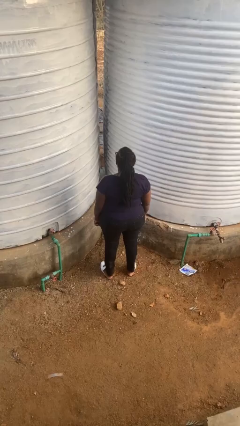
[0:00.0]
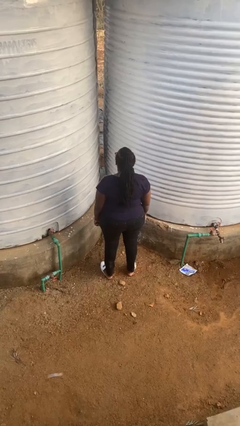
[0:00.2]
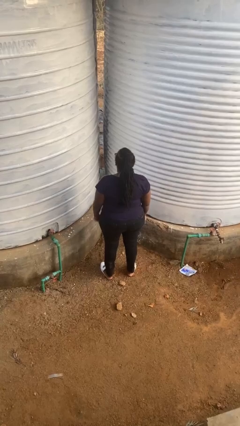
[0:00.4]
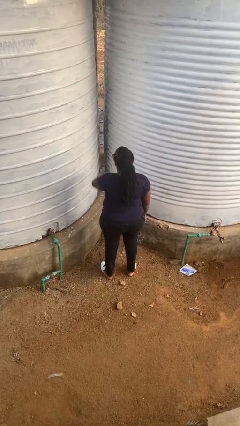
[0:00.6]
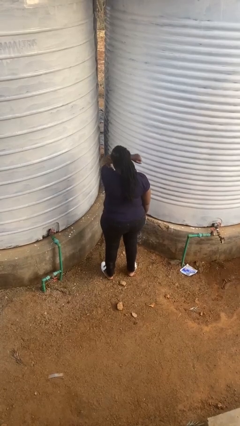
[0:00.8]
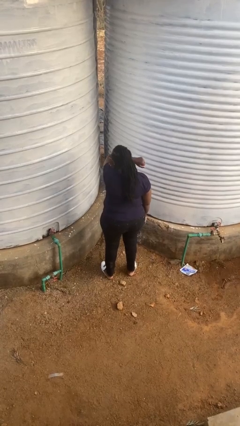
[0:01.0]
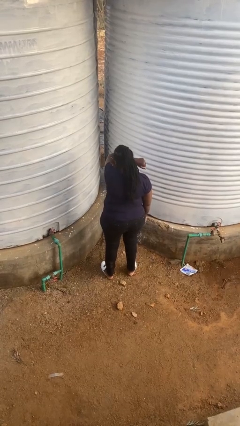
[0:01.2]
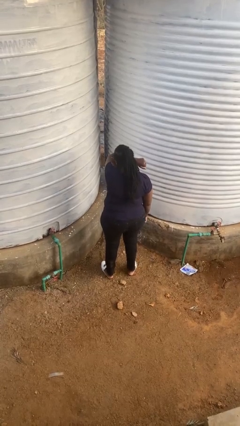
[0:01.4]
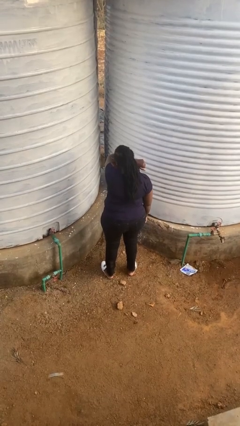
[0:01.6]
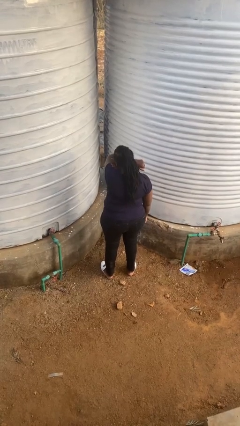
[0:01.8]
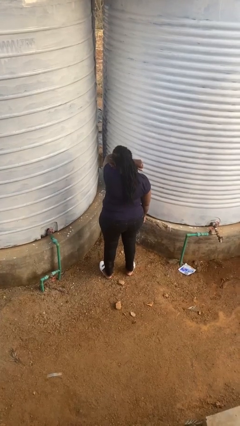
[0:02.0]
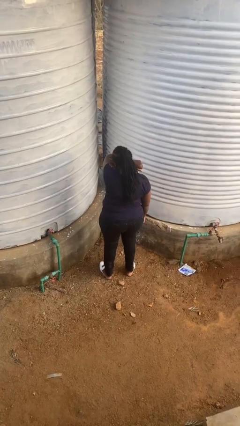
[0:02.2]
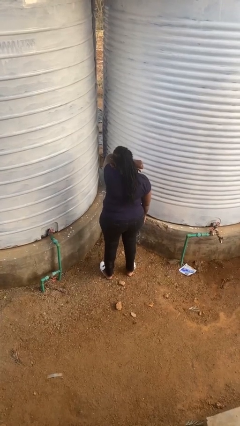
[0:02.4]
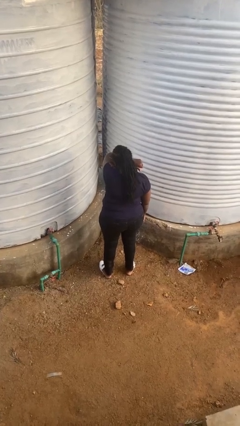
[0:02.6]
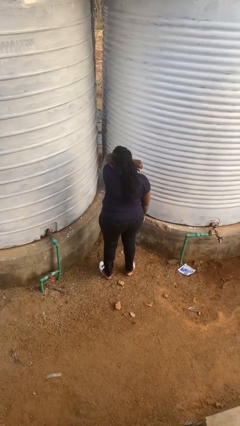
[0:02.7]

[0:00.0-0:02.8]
person sneezes into arm

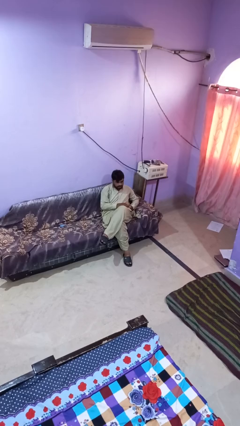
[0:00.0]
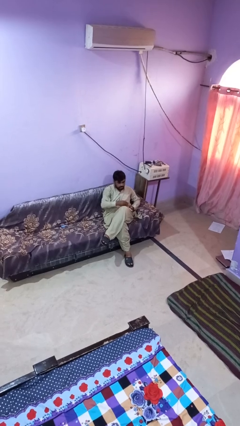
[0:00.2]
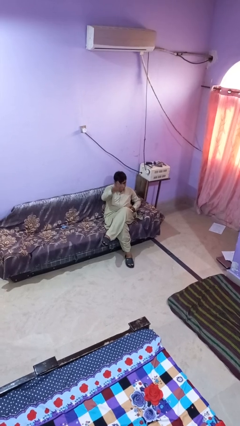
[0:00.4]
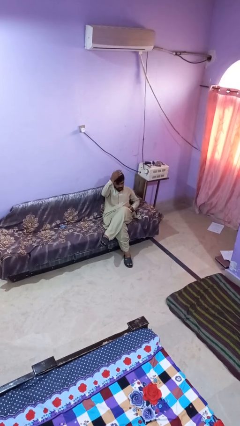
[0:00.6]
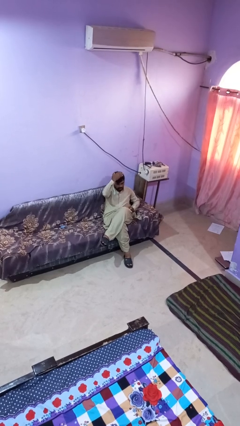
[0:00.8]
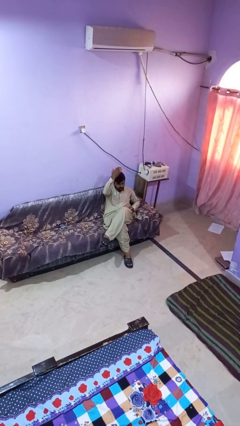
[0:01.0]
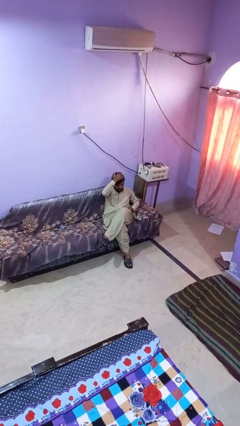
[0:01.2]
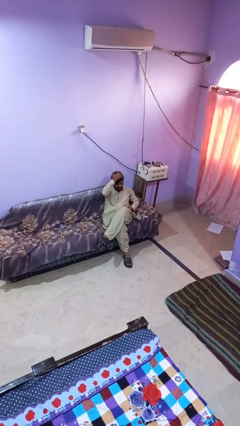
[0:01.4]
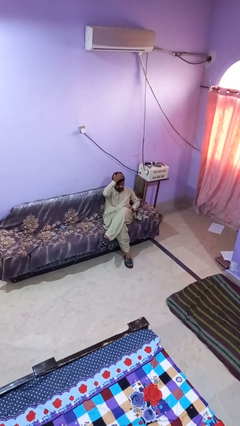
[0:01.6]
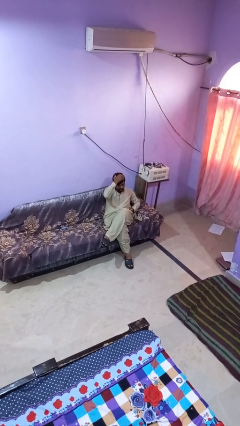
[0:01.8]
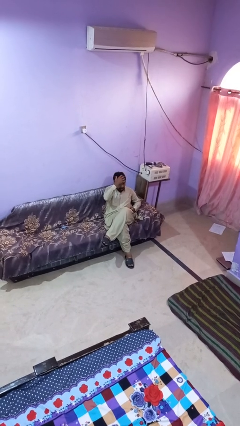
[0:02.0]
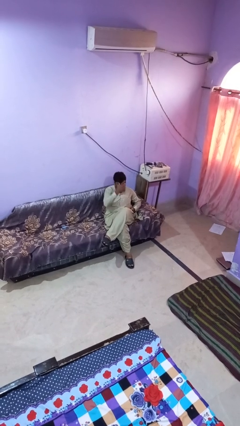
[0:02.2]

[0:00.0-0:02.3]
person pats head

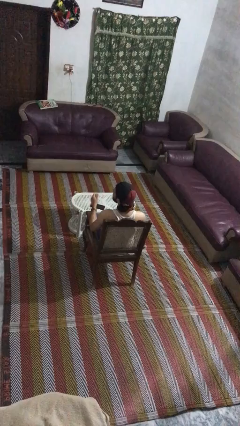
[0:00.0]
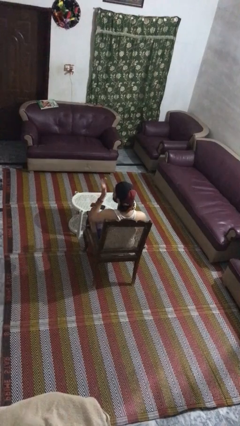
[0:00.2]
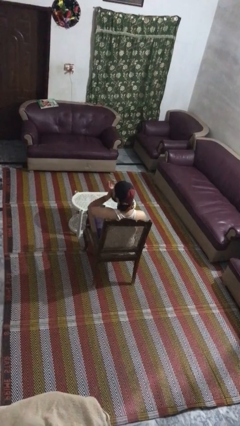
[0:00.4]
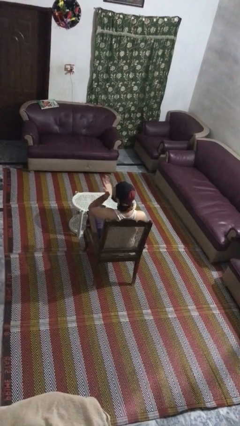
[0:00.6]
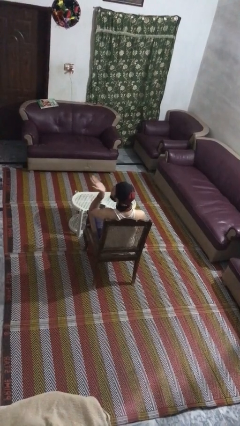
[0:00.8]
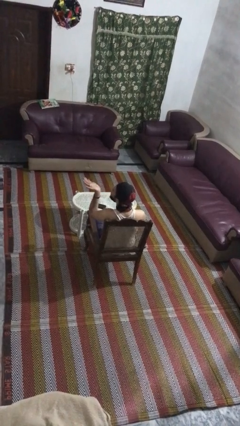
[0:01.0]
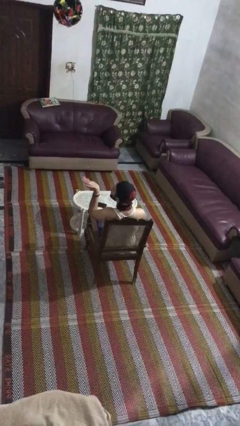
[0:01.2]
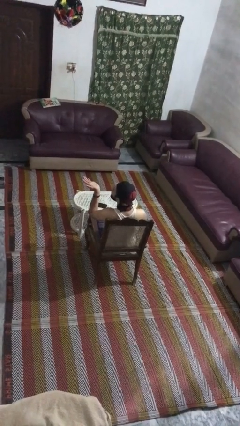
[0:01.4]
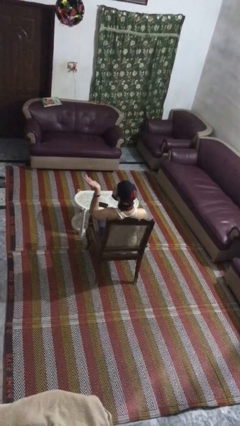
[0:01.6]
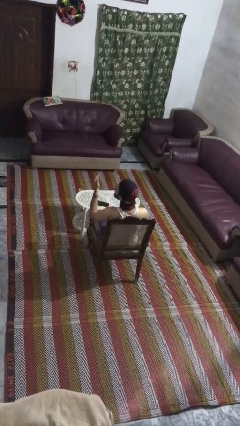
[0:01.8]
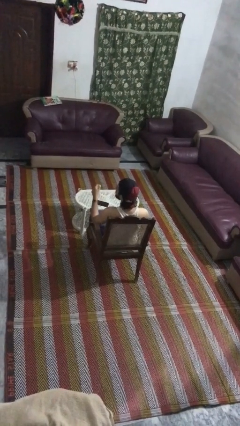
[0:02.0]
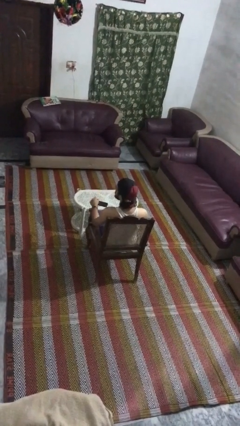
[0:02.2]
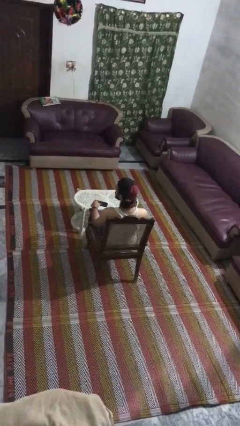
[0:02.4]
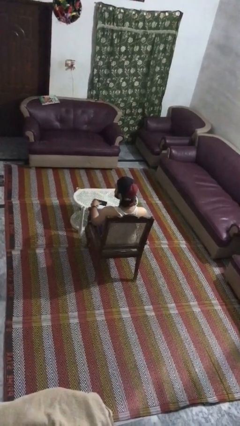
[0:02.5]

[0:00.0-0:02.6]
person gestures blow kiss

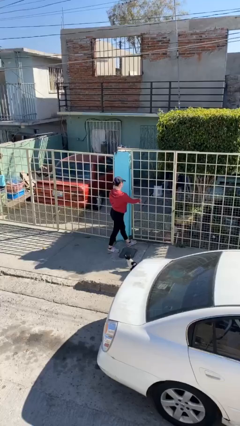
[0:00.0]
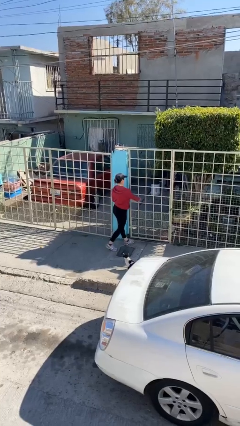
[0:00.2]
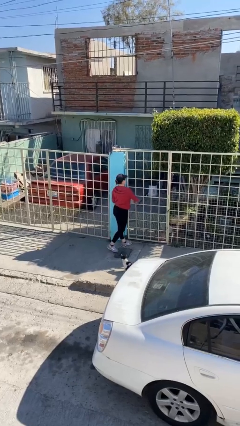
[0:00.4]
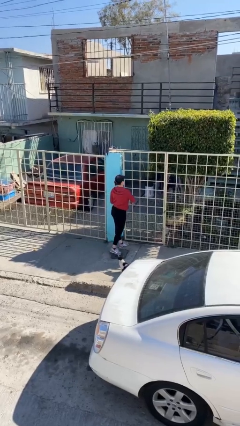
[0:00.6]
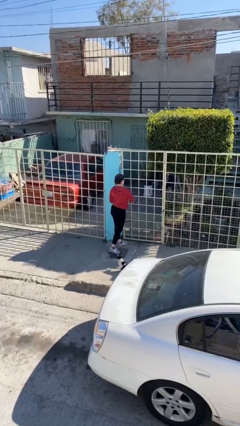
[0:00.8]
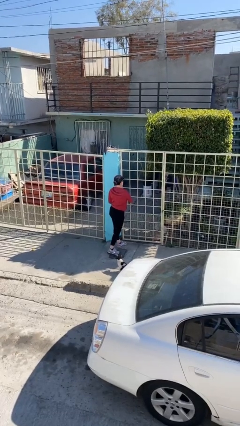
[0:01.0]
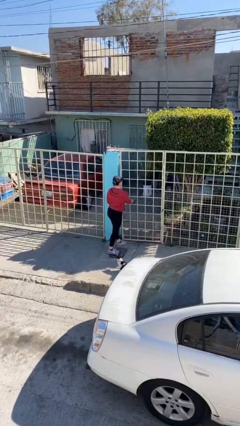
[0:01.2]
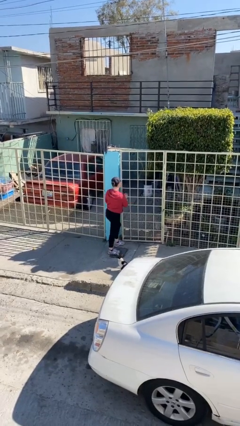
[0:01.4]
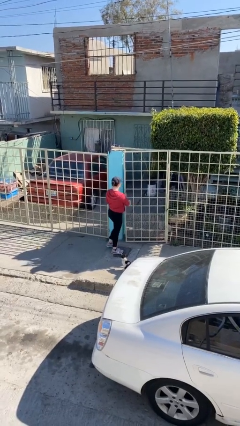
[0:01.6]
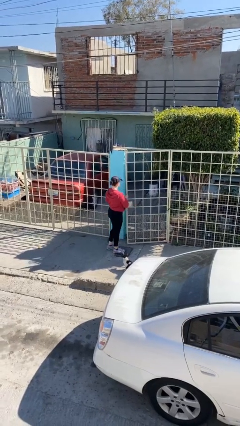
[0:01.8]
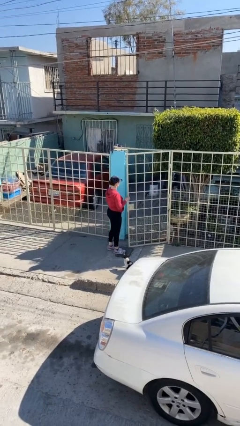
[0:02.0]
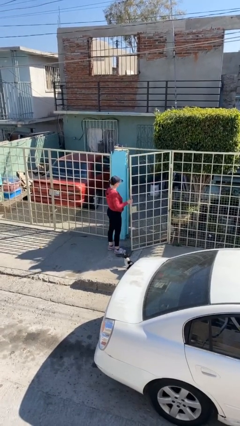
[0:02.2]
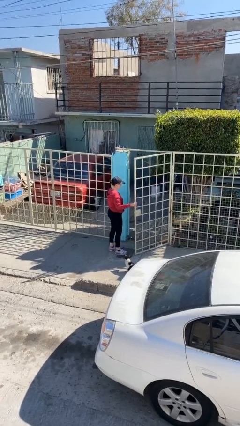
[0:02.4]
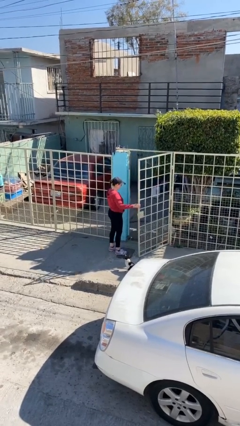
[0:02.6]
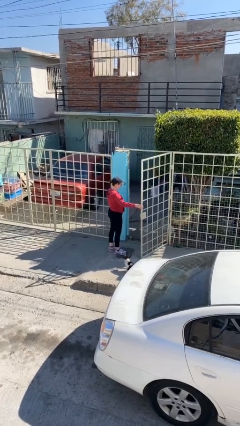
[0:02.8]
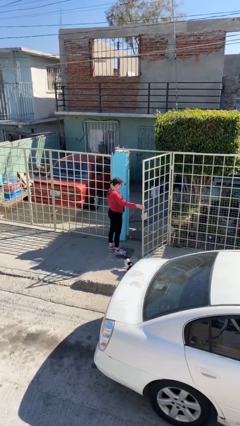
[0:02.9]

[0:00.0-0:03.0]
person opens facility door

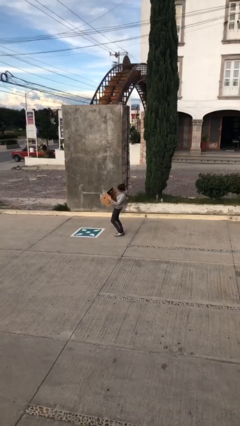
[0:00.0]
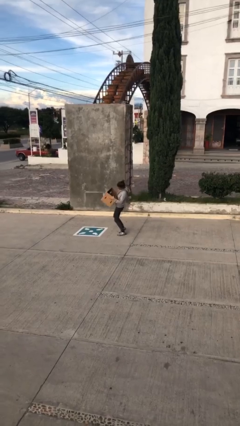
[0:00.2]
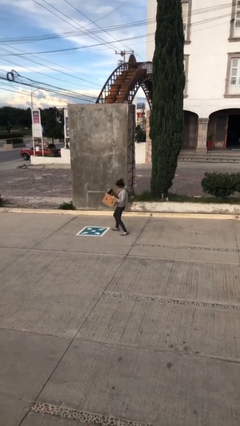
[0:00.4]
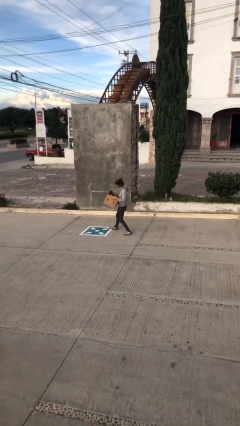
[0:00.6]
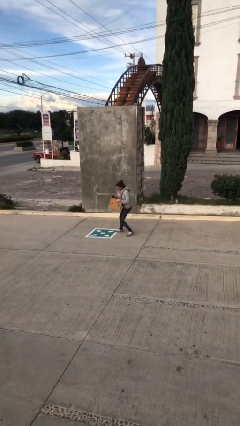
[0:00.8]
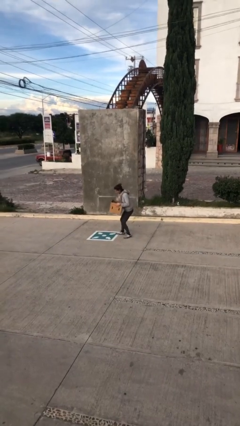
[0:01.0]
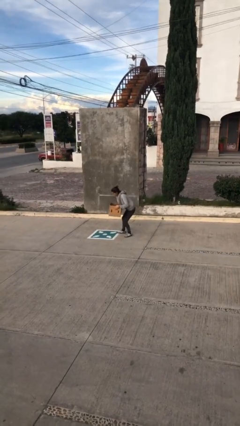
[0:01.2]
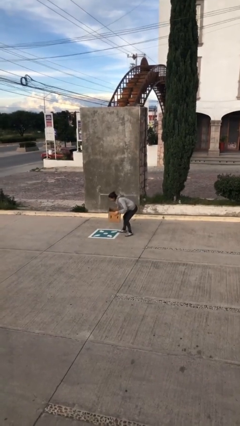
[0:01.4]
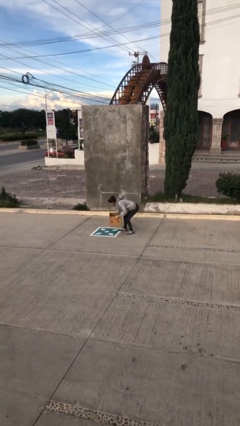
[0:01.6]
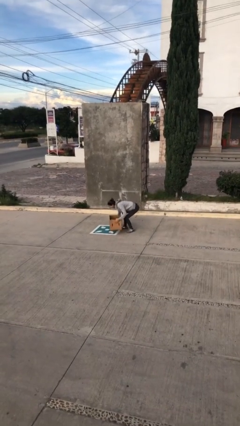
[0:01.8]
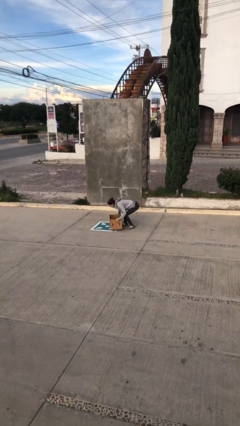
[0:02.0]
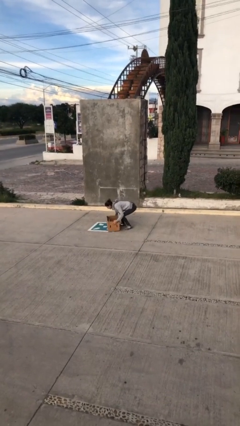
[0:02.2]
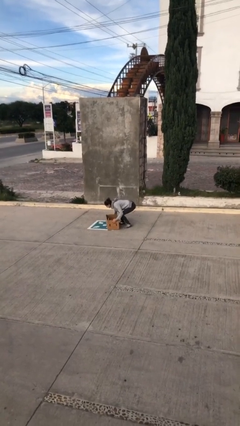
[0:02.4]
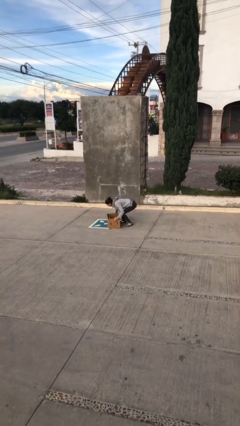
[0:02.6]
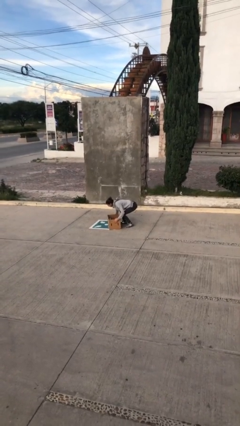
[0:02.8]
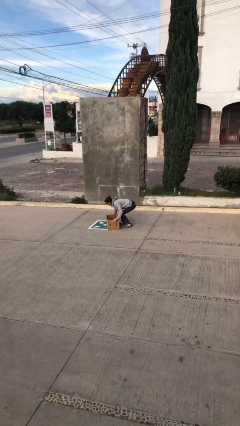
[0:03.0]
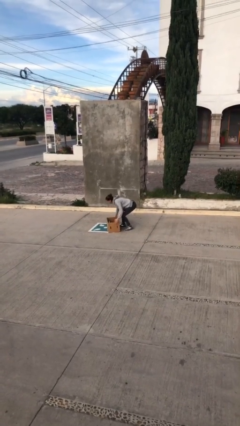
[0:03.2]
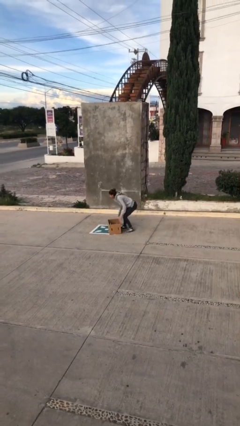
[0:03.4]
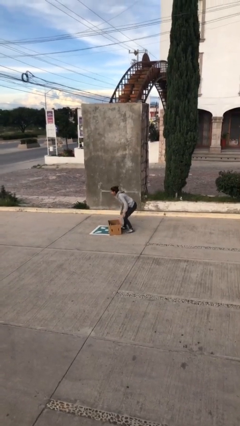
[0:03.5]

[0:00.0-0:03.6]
person puts down object on floor

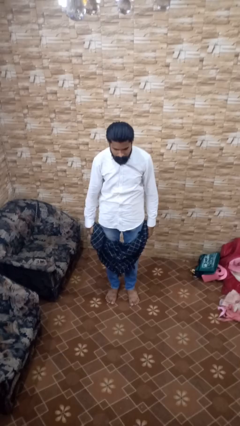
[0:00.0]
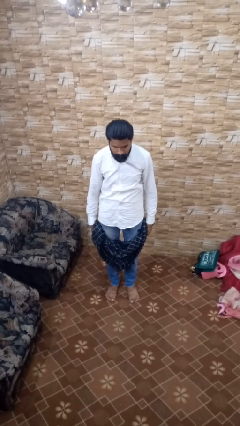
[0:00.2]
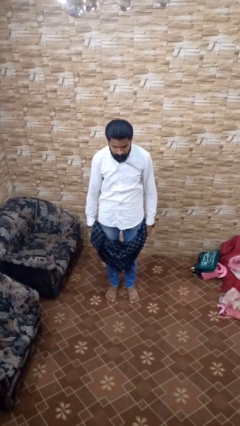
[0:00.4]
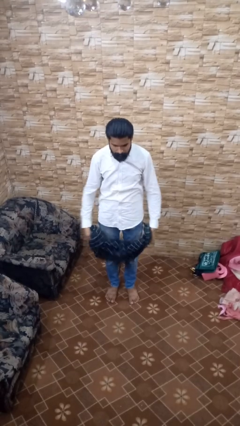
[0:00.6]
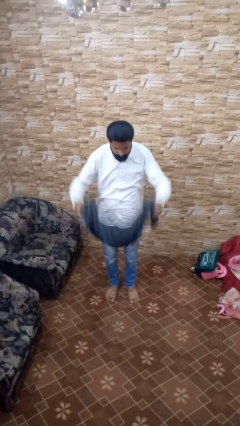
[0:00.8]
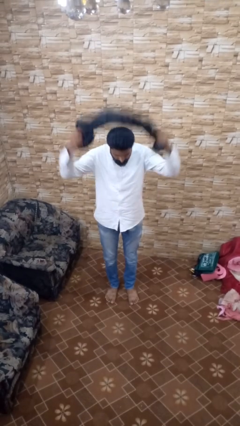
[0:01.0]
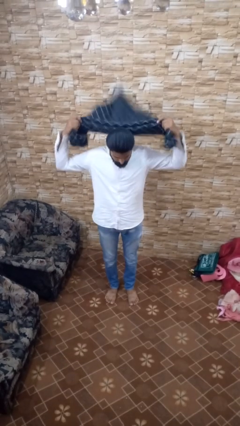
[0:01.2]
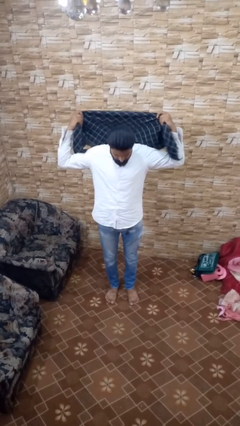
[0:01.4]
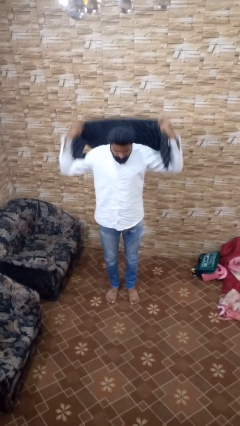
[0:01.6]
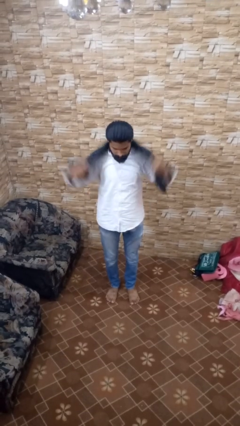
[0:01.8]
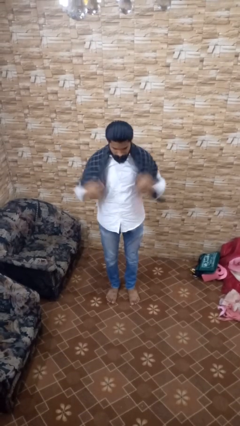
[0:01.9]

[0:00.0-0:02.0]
person puts on scarf

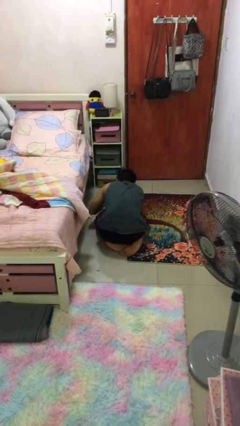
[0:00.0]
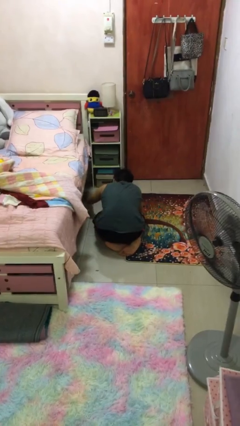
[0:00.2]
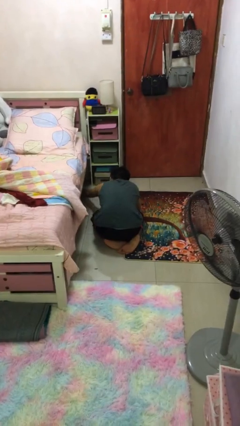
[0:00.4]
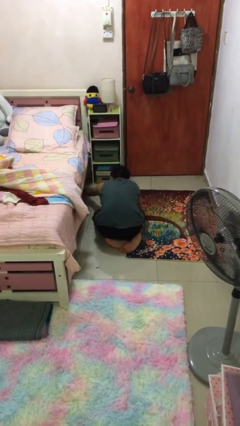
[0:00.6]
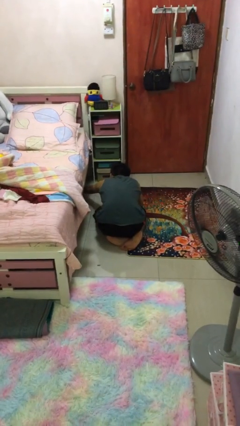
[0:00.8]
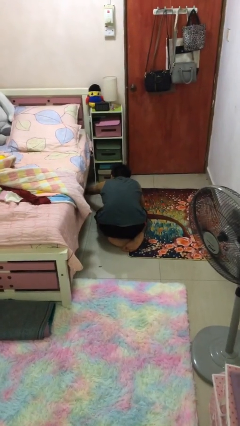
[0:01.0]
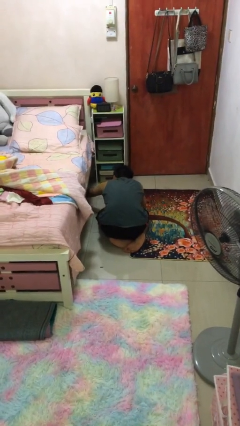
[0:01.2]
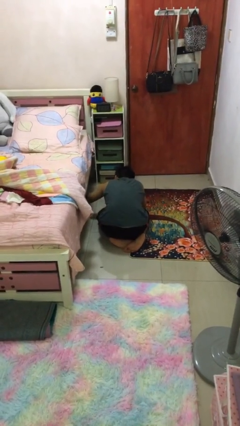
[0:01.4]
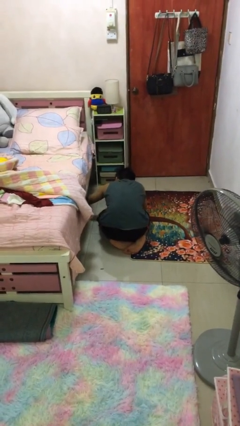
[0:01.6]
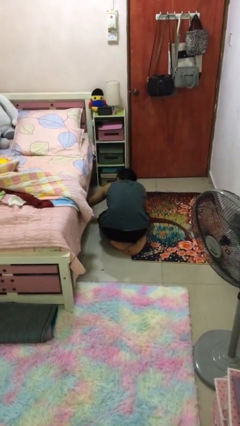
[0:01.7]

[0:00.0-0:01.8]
person searches under bed
